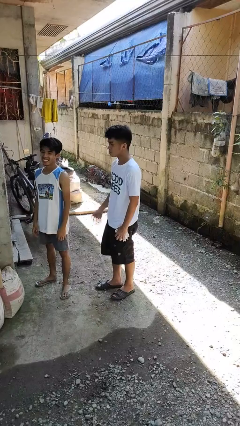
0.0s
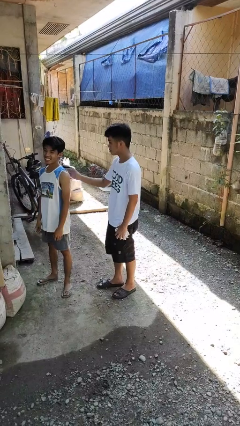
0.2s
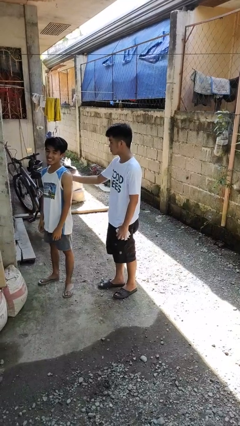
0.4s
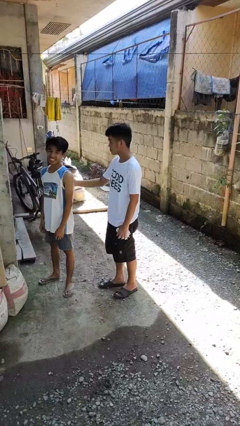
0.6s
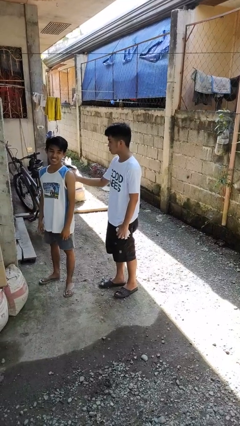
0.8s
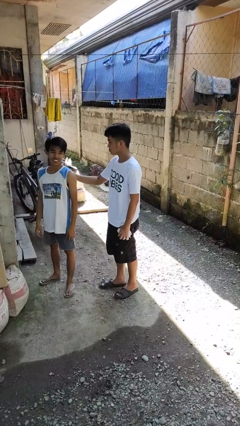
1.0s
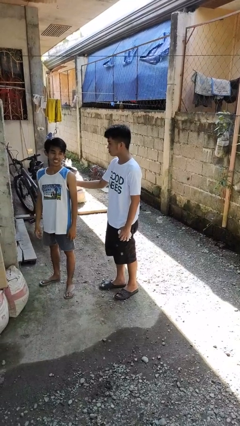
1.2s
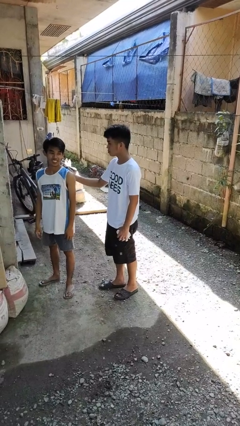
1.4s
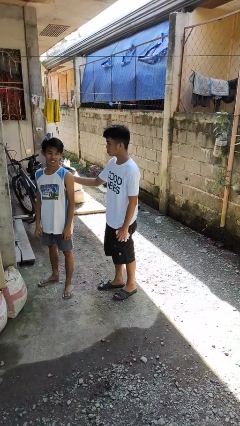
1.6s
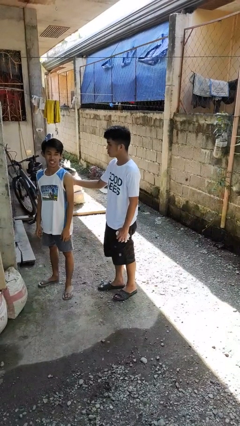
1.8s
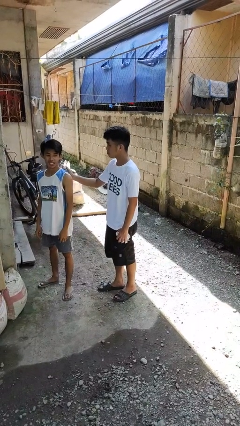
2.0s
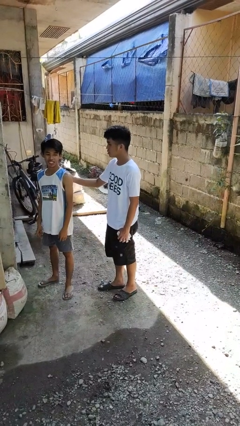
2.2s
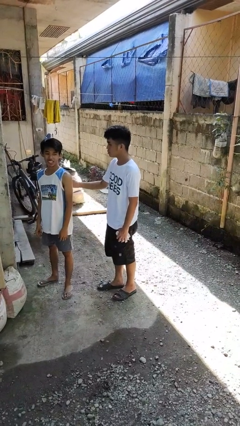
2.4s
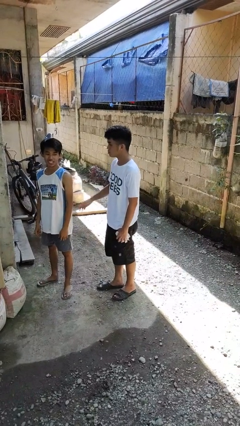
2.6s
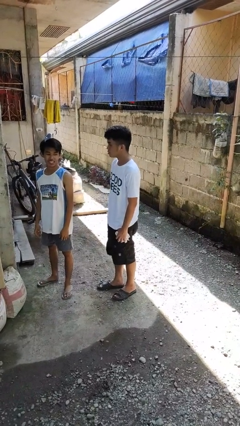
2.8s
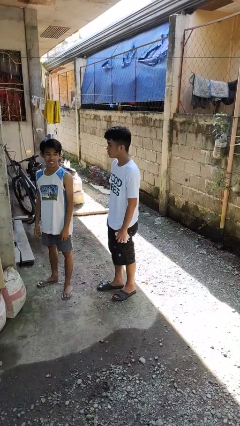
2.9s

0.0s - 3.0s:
person touches back of person

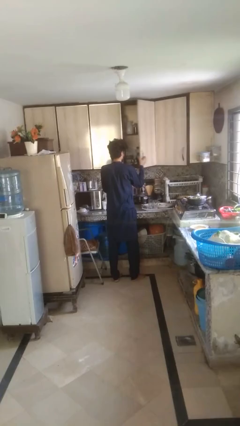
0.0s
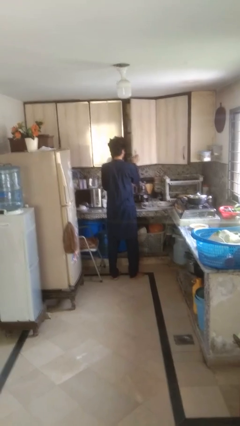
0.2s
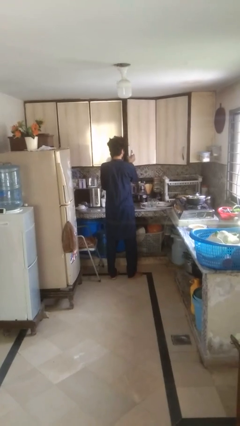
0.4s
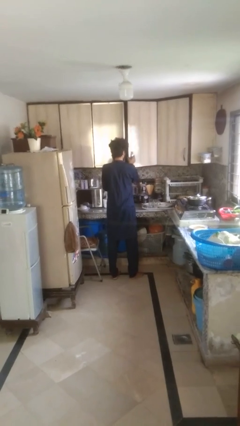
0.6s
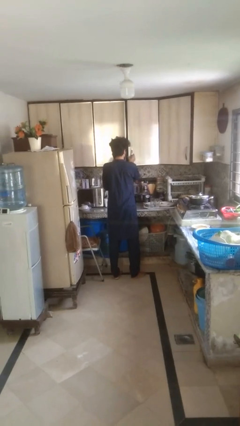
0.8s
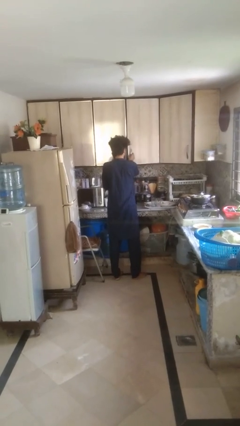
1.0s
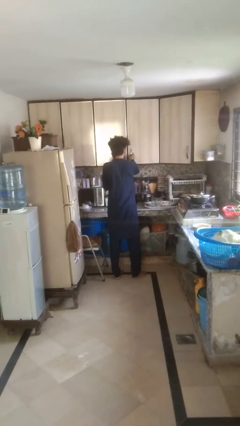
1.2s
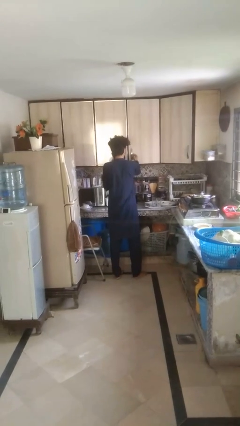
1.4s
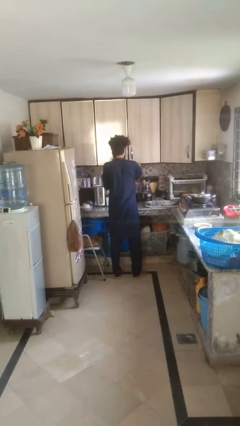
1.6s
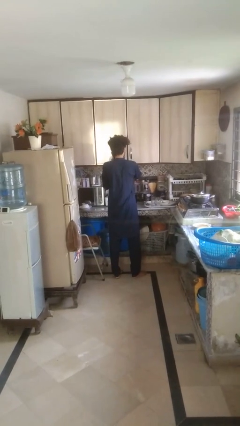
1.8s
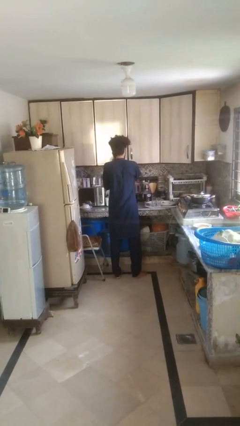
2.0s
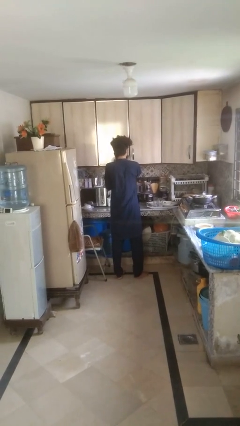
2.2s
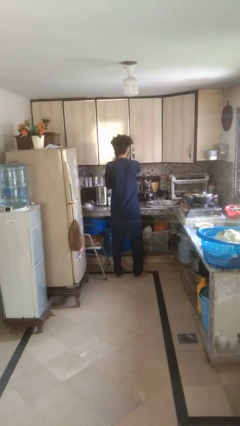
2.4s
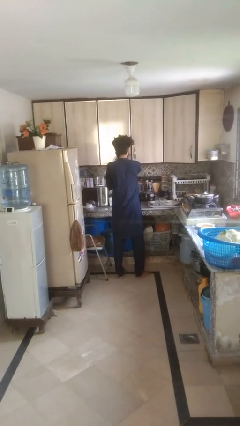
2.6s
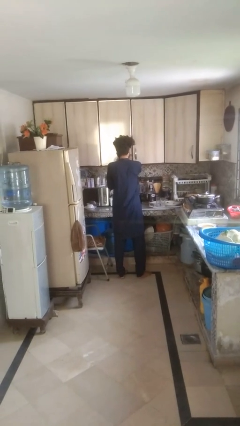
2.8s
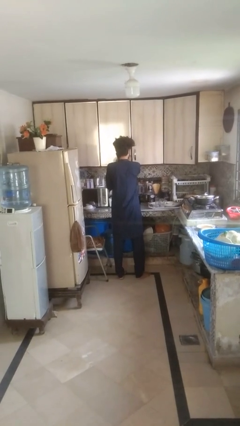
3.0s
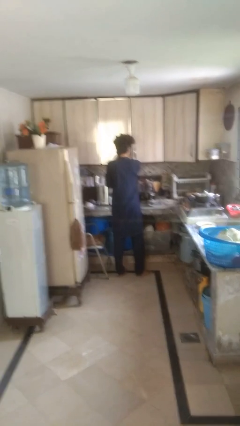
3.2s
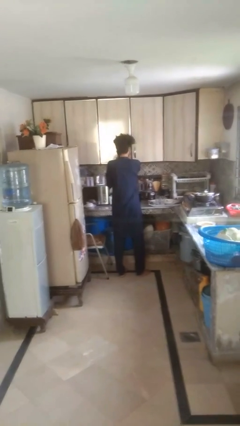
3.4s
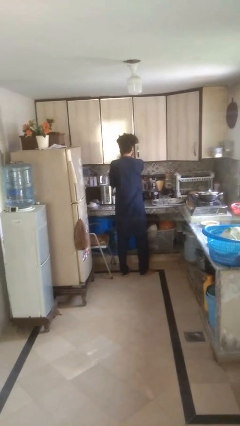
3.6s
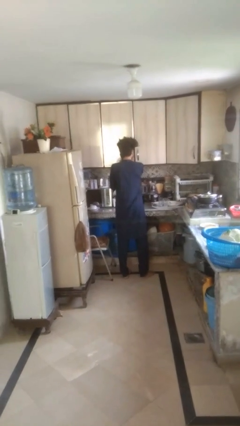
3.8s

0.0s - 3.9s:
person closes cabinet

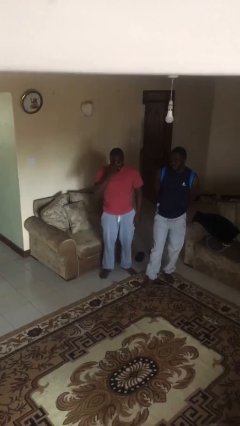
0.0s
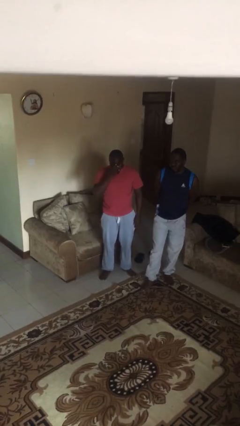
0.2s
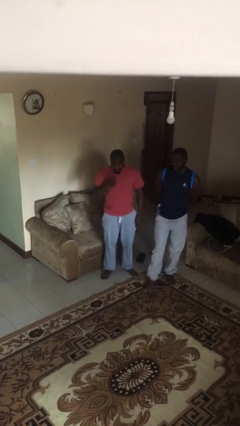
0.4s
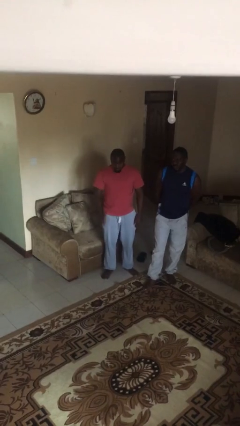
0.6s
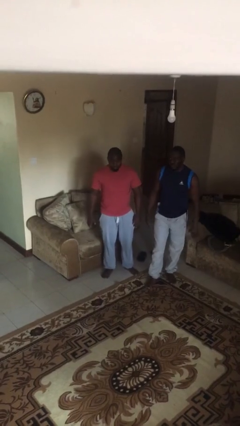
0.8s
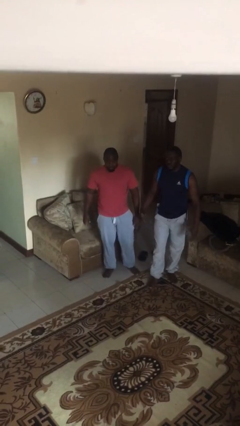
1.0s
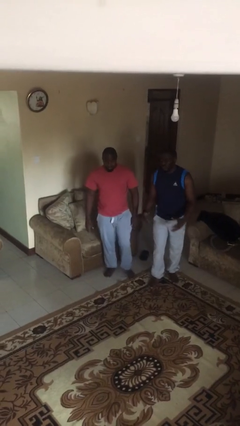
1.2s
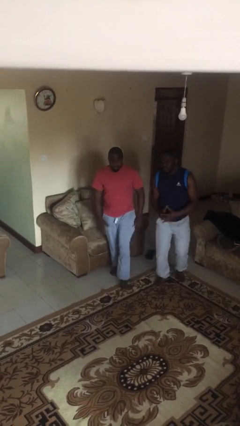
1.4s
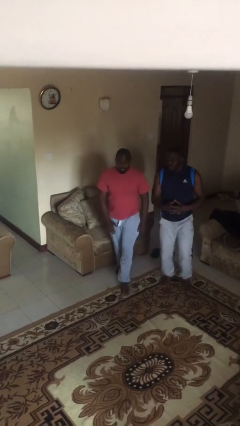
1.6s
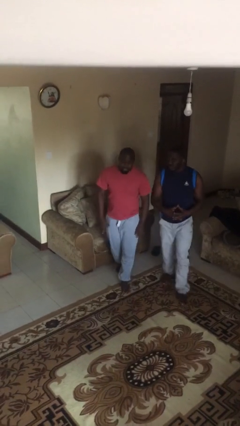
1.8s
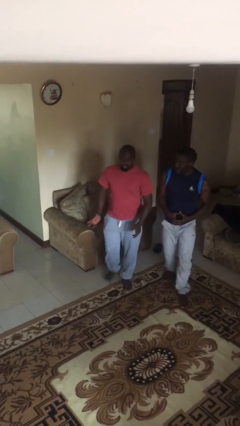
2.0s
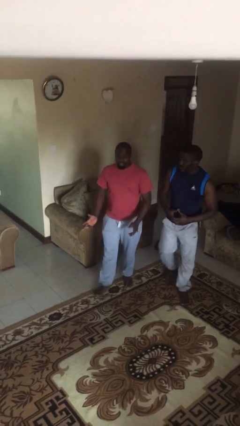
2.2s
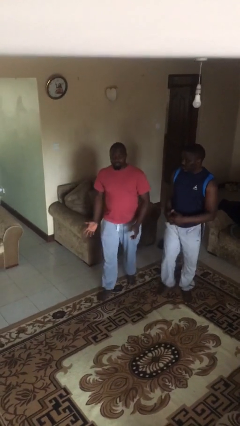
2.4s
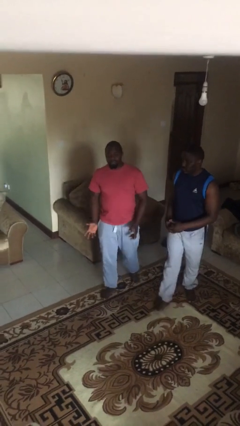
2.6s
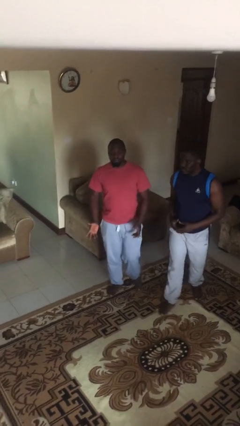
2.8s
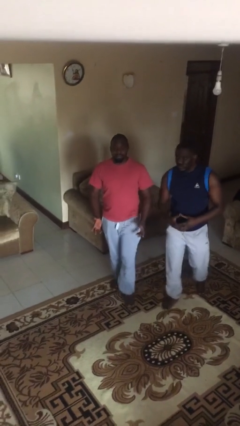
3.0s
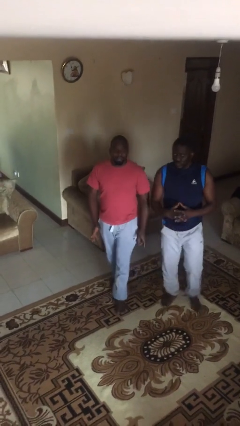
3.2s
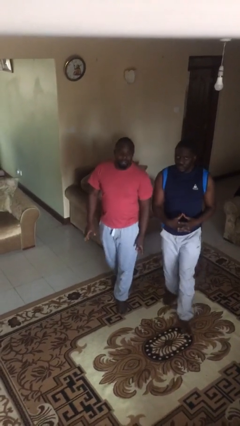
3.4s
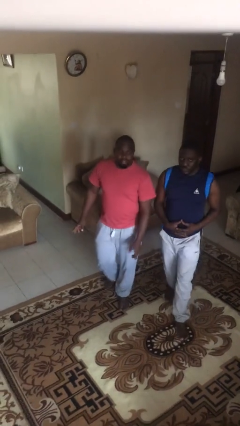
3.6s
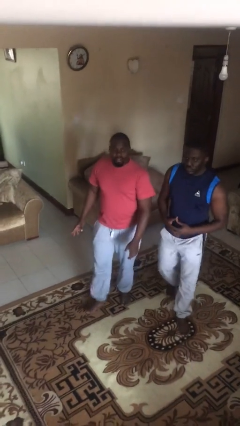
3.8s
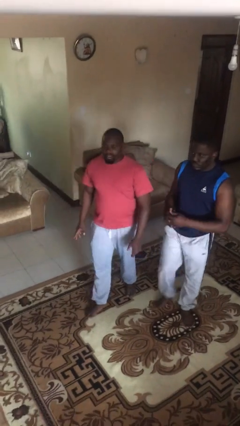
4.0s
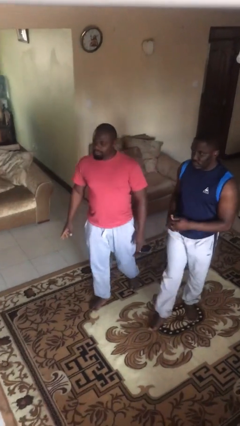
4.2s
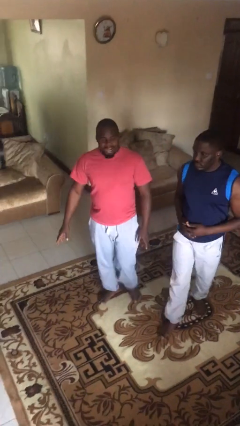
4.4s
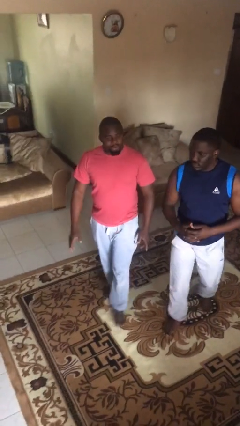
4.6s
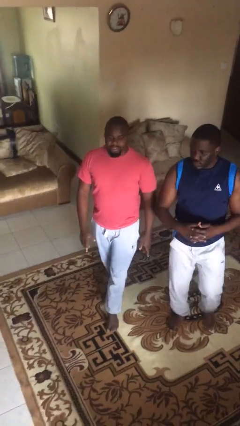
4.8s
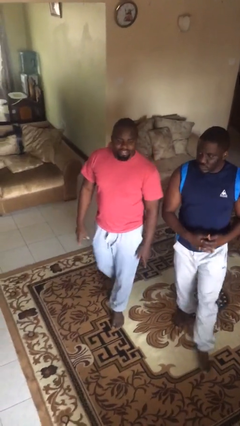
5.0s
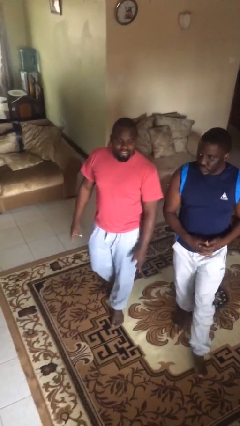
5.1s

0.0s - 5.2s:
person talks to person

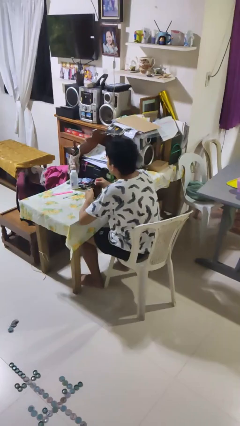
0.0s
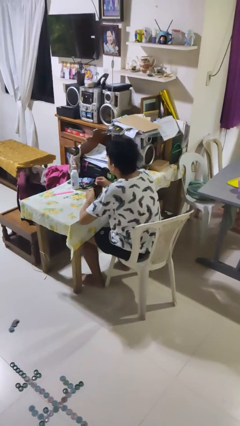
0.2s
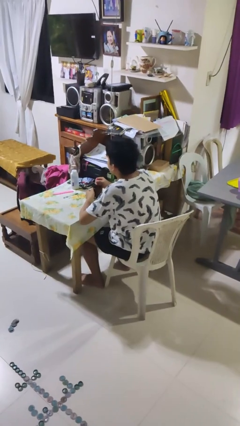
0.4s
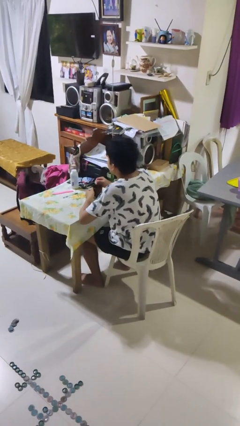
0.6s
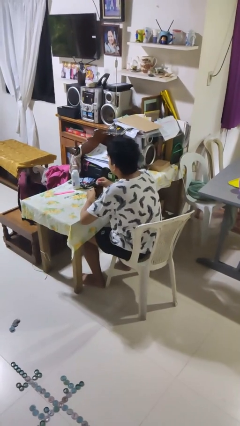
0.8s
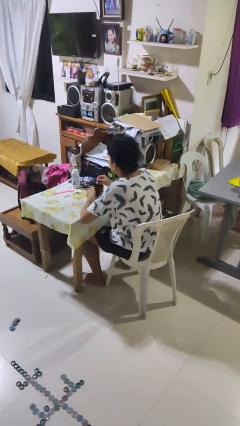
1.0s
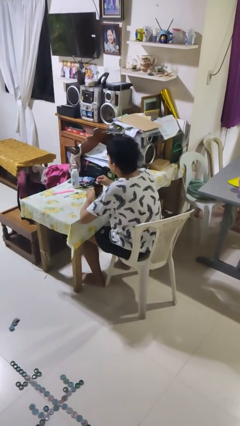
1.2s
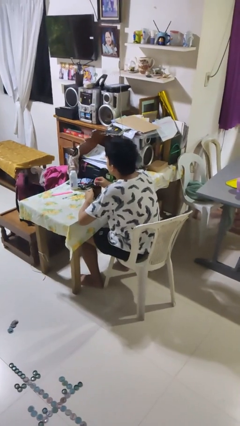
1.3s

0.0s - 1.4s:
person stirs mug

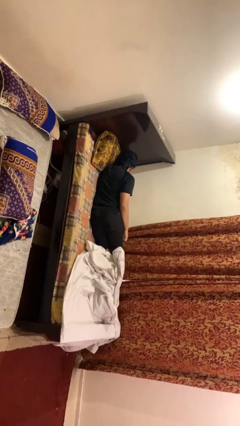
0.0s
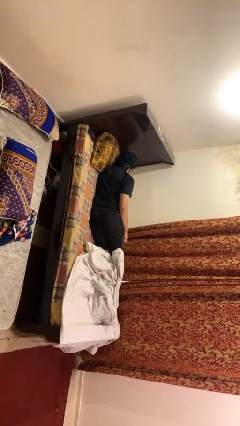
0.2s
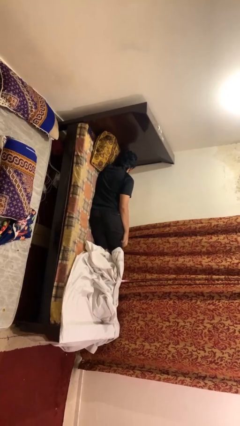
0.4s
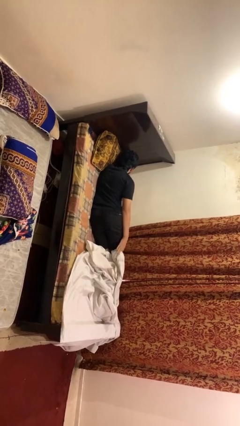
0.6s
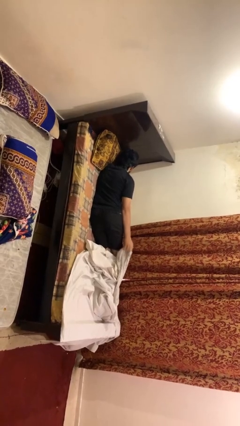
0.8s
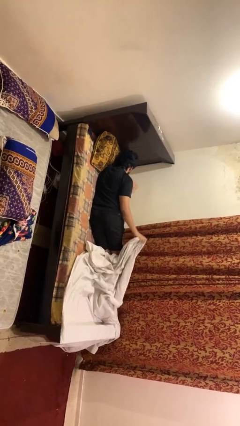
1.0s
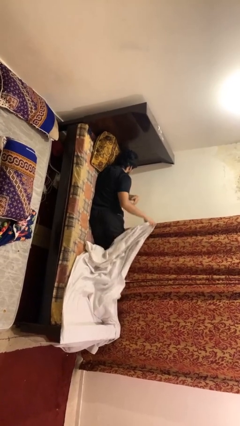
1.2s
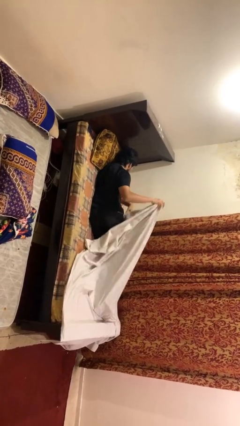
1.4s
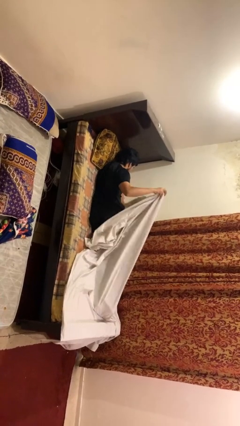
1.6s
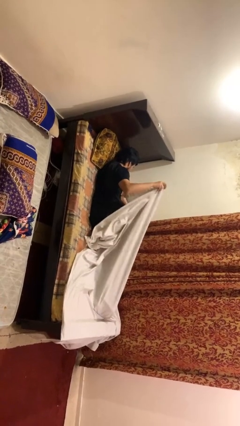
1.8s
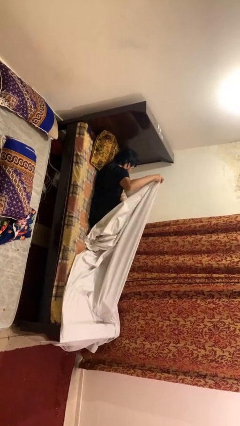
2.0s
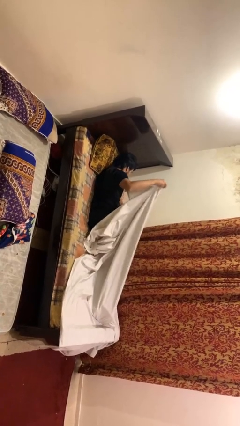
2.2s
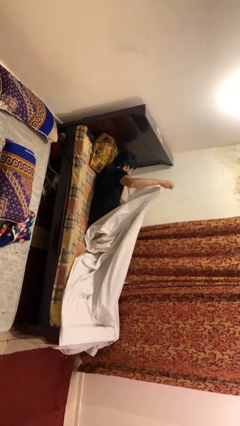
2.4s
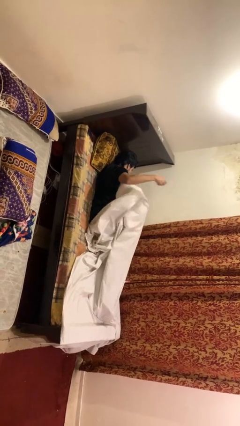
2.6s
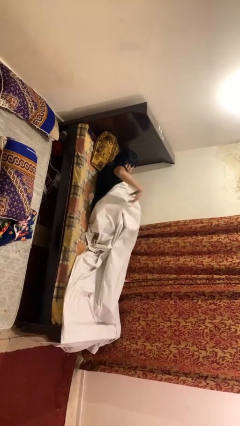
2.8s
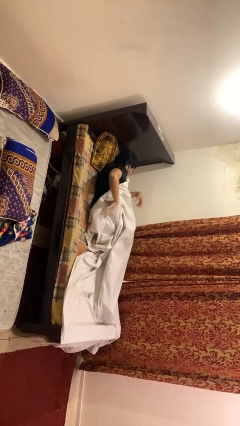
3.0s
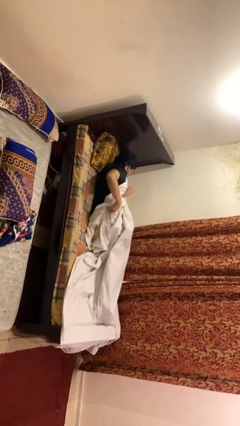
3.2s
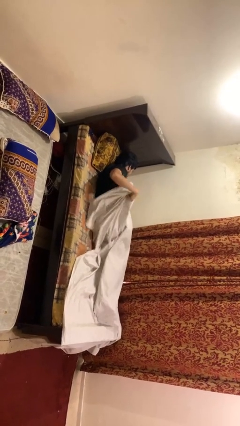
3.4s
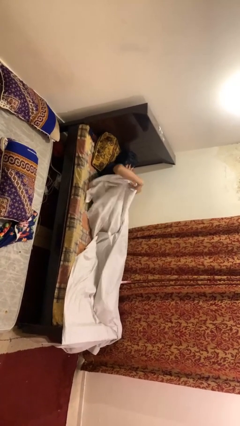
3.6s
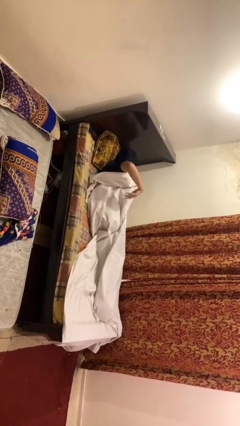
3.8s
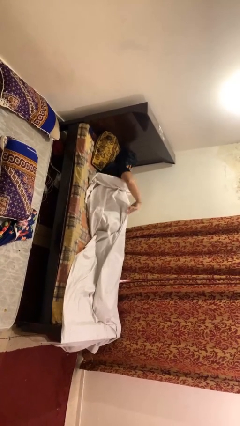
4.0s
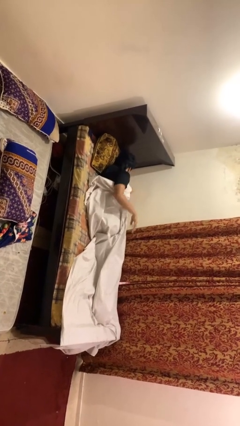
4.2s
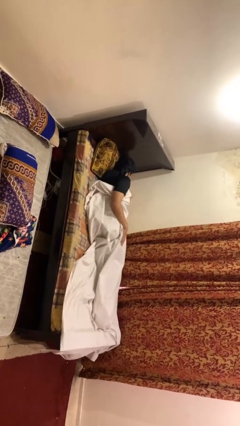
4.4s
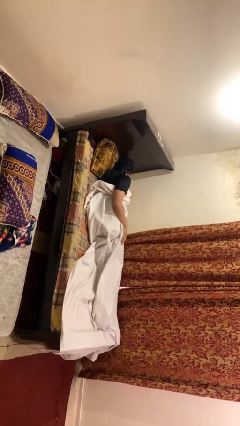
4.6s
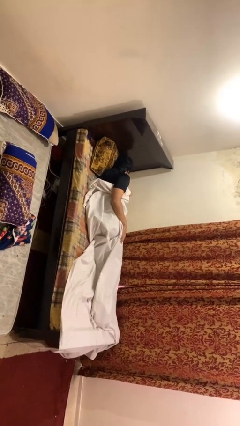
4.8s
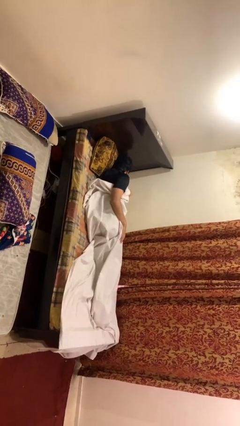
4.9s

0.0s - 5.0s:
person covers with bedsheets
